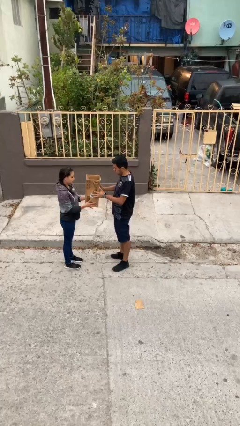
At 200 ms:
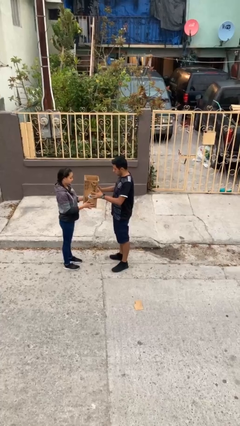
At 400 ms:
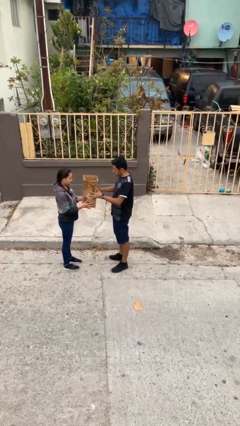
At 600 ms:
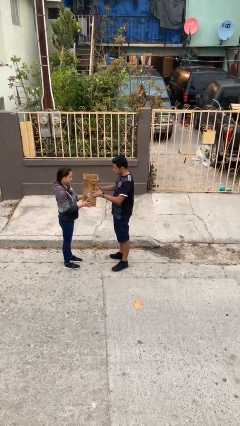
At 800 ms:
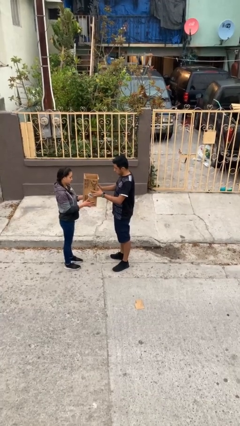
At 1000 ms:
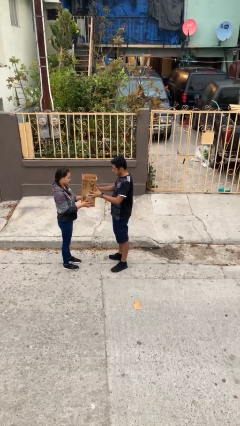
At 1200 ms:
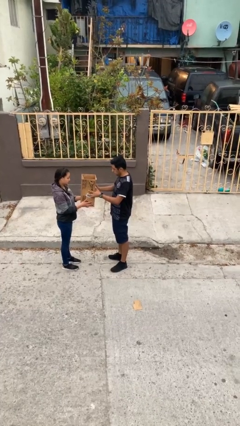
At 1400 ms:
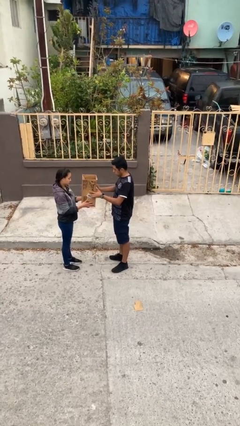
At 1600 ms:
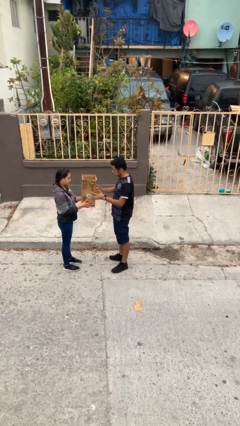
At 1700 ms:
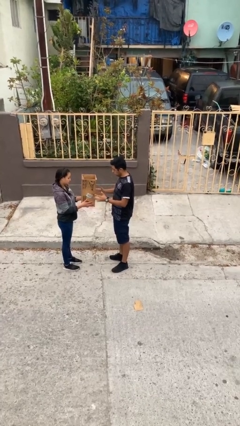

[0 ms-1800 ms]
person transfers object to person

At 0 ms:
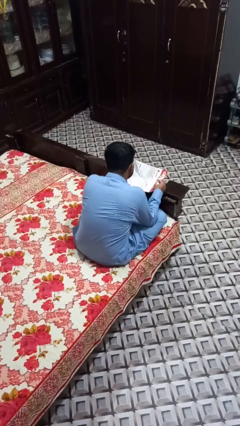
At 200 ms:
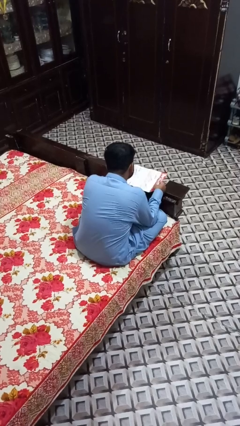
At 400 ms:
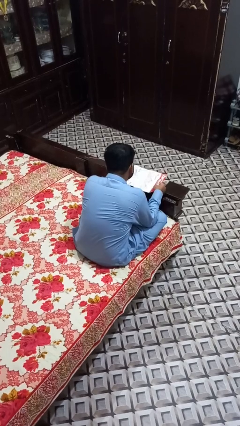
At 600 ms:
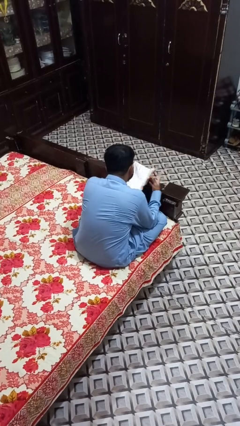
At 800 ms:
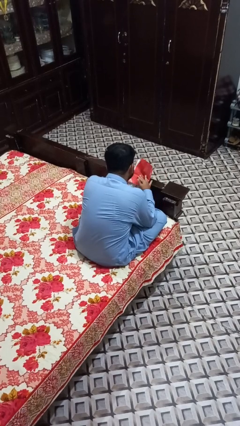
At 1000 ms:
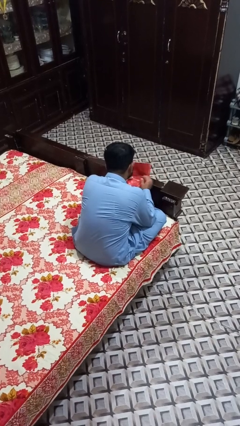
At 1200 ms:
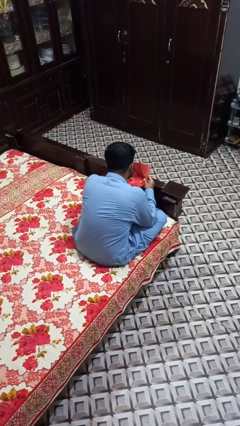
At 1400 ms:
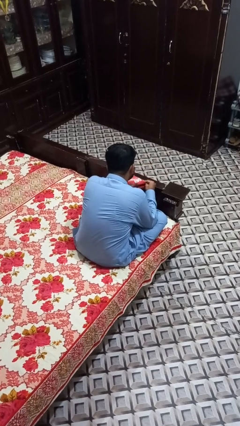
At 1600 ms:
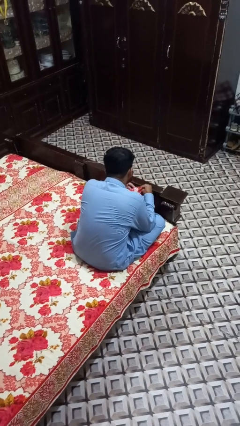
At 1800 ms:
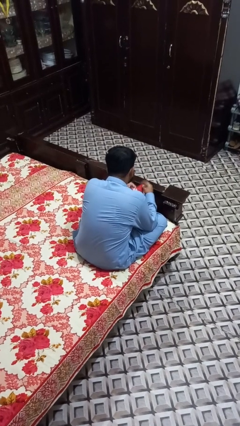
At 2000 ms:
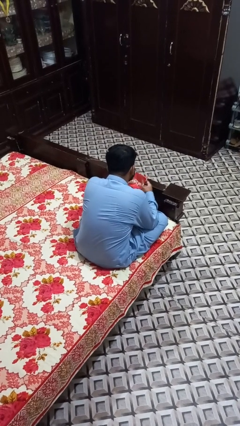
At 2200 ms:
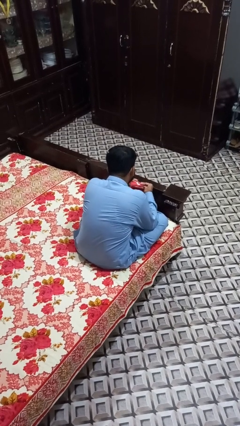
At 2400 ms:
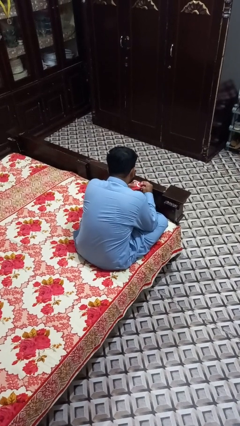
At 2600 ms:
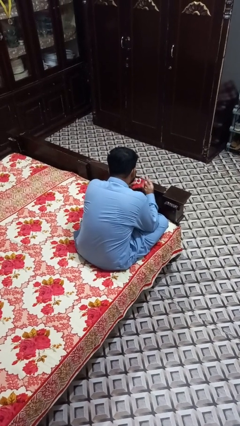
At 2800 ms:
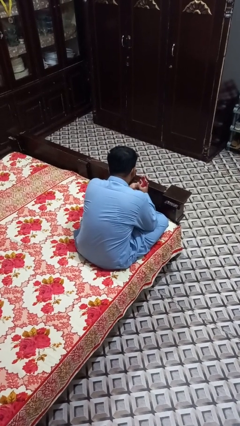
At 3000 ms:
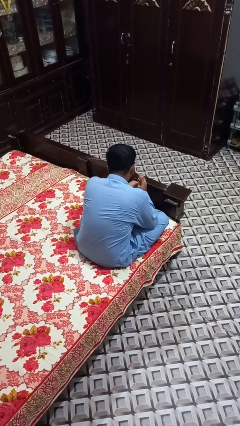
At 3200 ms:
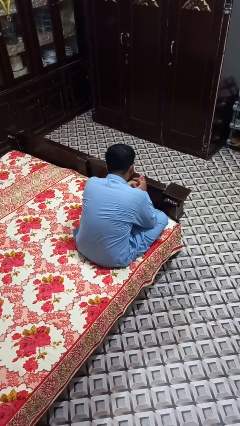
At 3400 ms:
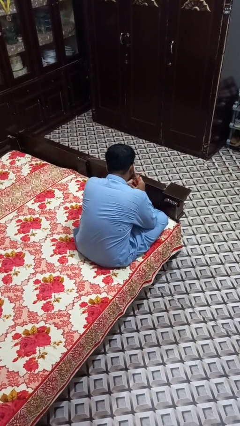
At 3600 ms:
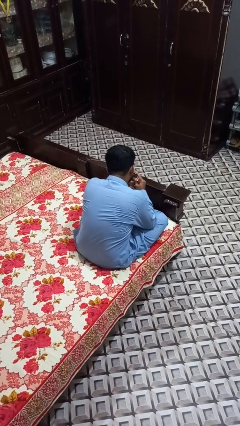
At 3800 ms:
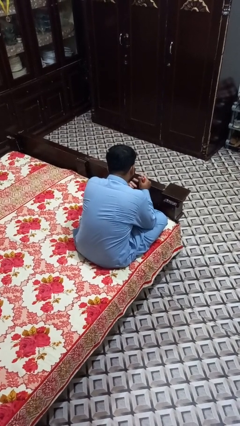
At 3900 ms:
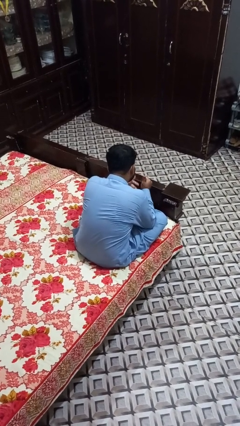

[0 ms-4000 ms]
person crumples paper

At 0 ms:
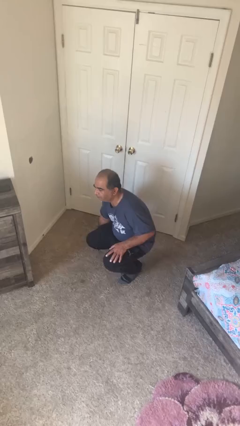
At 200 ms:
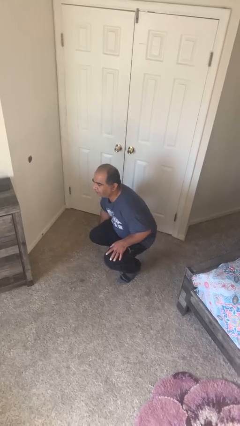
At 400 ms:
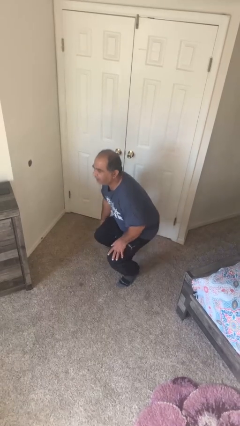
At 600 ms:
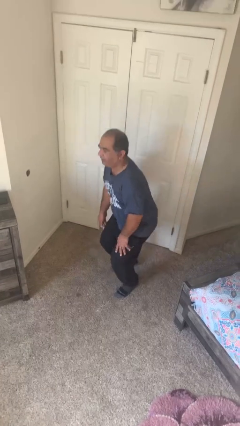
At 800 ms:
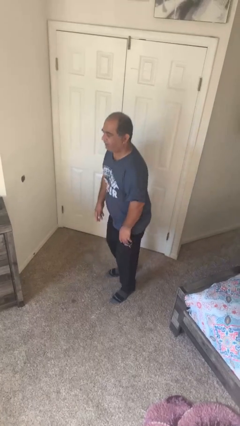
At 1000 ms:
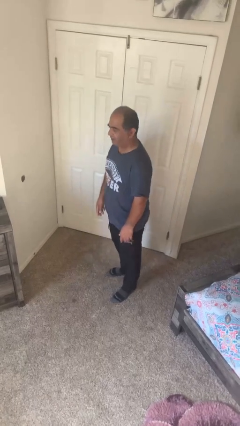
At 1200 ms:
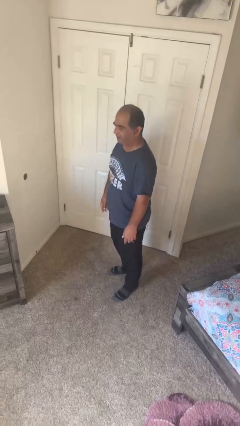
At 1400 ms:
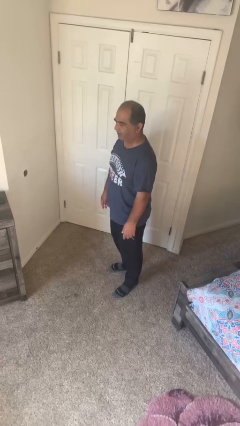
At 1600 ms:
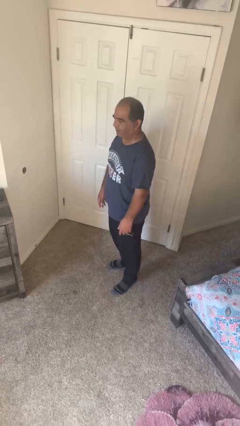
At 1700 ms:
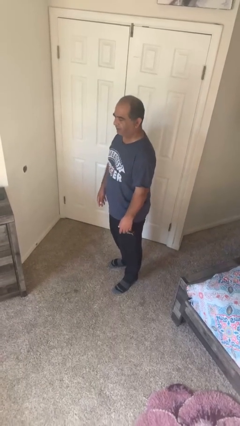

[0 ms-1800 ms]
person stands up

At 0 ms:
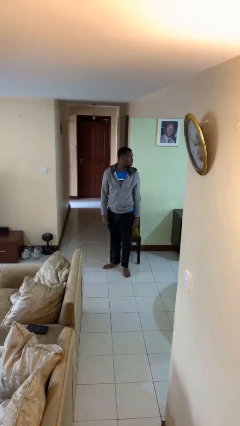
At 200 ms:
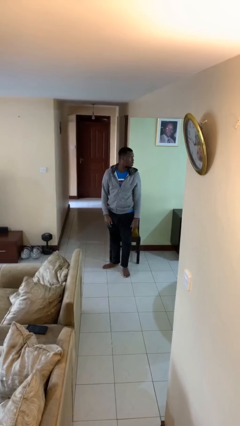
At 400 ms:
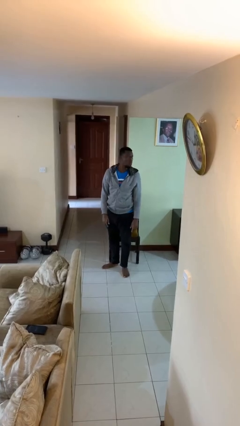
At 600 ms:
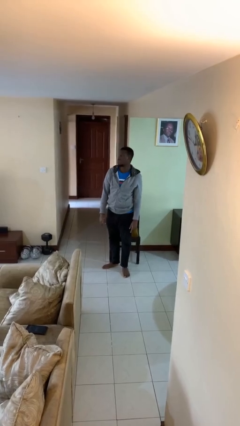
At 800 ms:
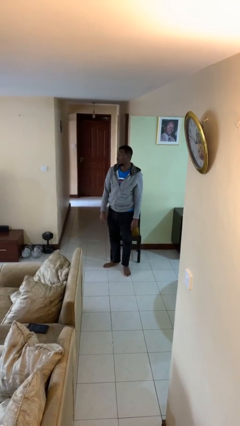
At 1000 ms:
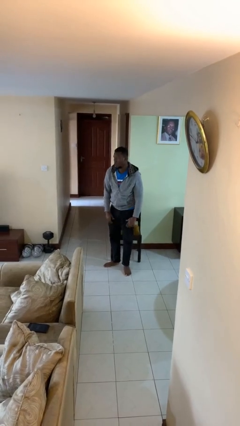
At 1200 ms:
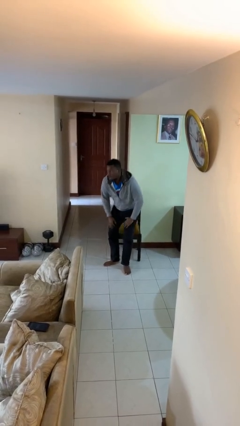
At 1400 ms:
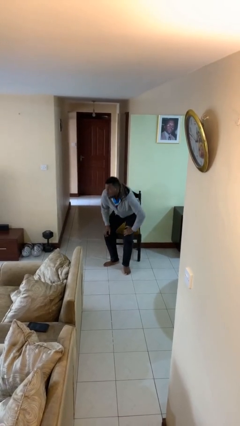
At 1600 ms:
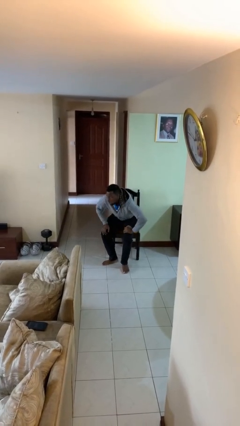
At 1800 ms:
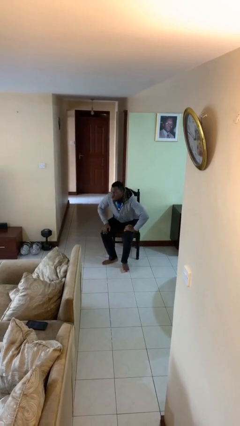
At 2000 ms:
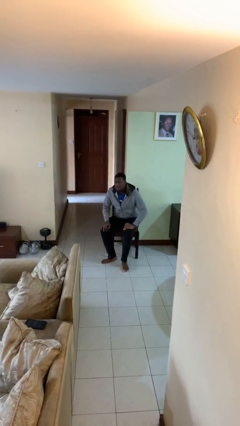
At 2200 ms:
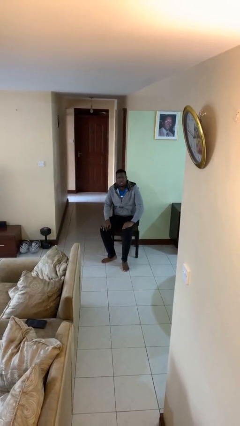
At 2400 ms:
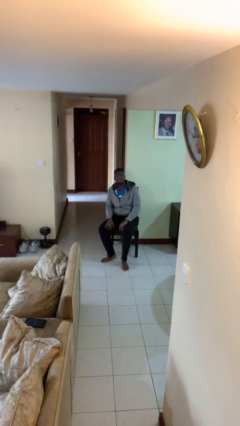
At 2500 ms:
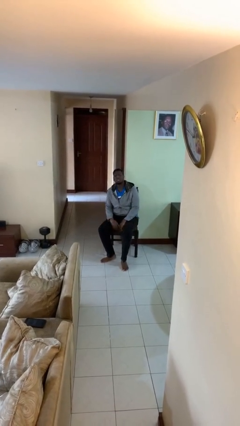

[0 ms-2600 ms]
person sits down

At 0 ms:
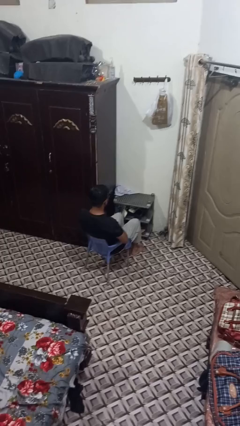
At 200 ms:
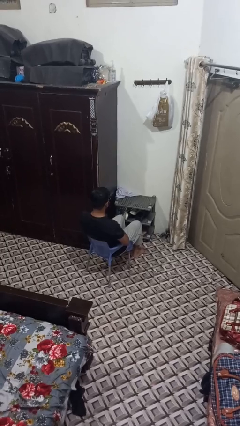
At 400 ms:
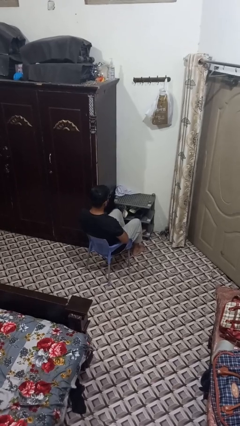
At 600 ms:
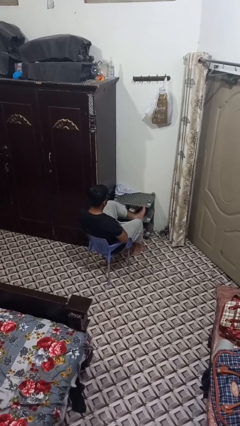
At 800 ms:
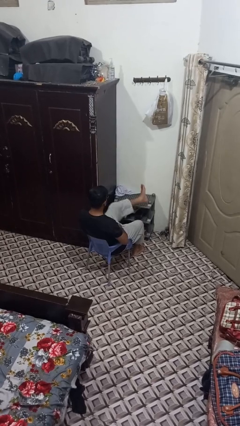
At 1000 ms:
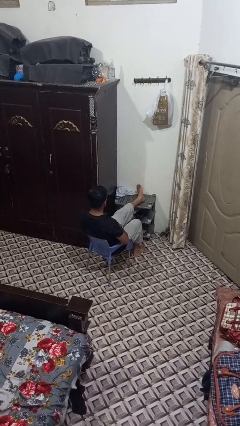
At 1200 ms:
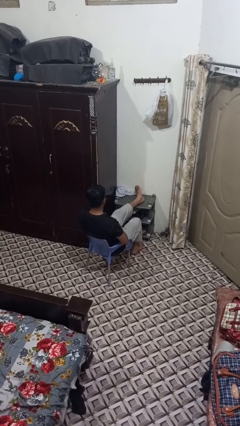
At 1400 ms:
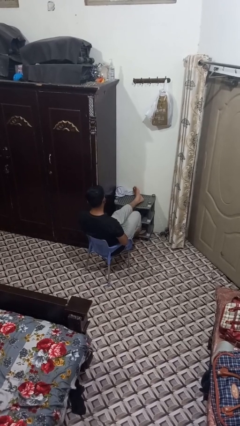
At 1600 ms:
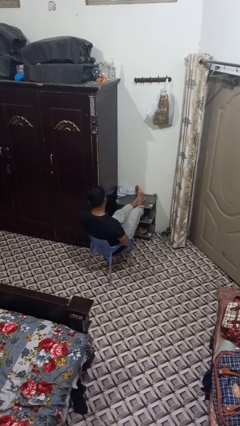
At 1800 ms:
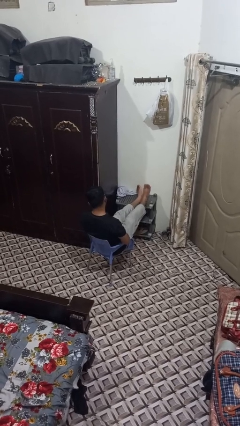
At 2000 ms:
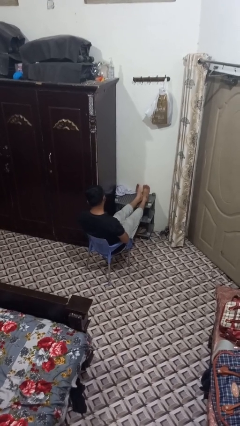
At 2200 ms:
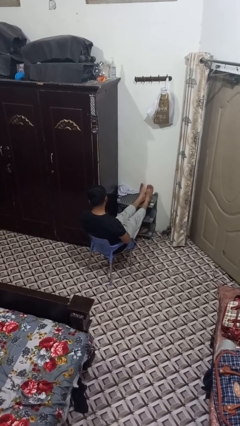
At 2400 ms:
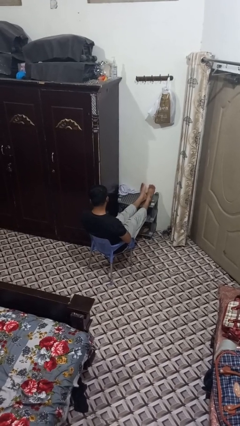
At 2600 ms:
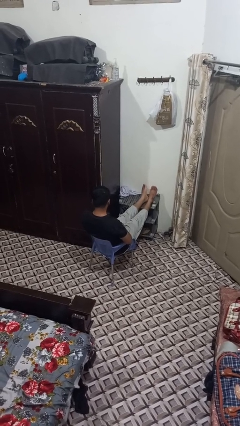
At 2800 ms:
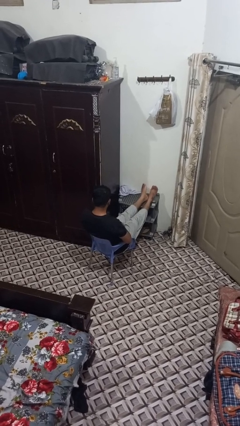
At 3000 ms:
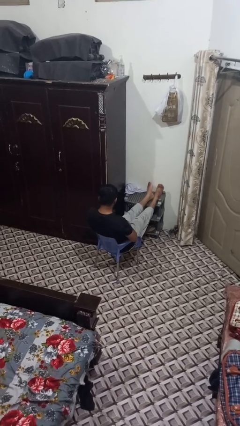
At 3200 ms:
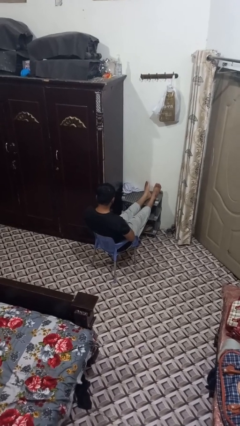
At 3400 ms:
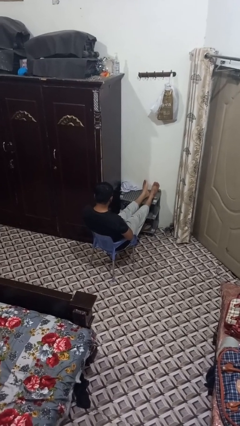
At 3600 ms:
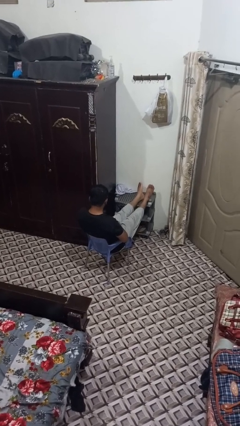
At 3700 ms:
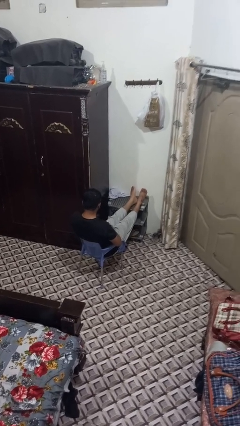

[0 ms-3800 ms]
person puts feet up

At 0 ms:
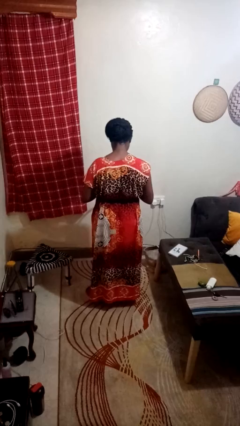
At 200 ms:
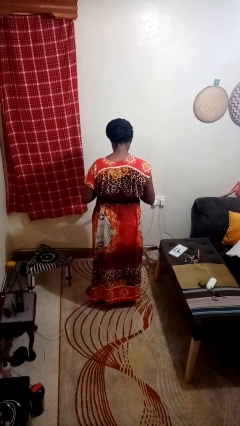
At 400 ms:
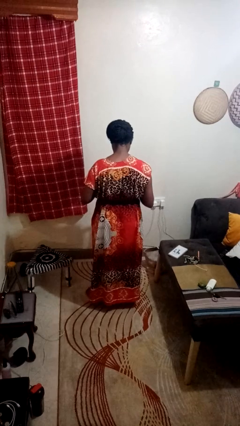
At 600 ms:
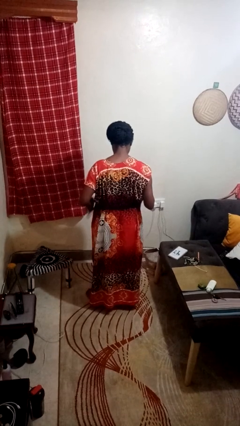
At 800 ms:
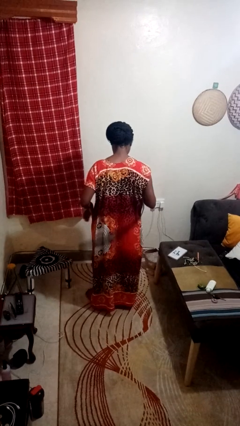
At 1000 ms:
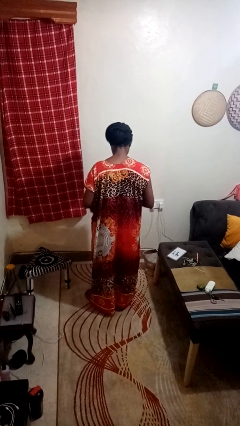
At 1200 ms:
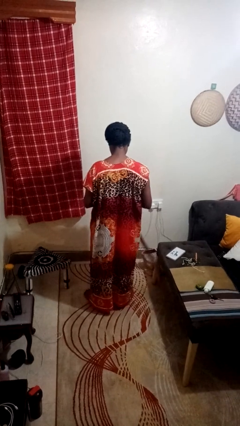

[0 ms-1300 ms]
person takes off belt

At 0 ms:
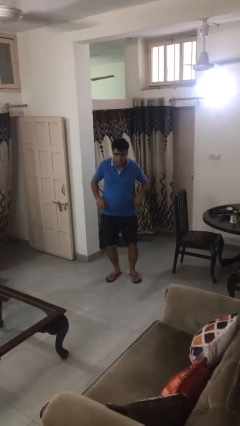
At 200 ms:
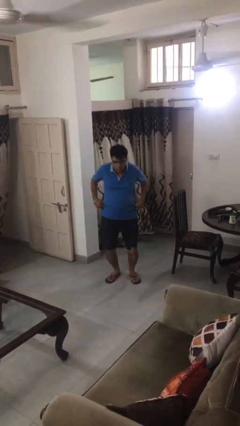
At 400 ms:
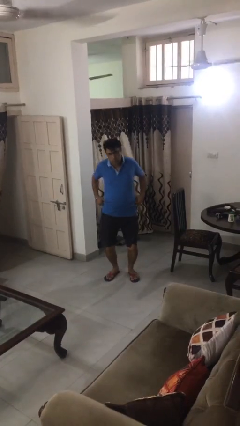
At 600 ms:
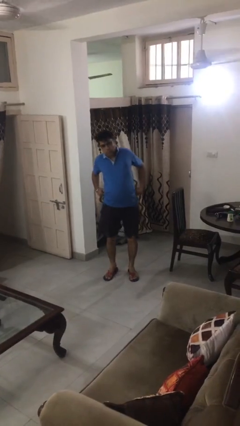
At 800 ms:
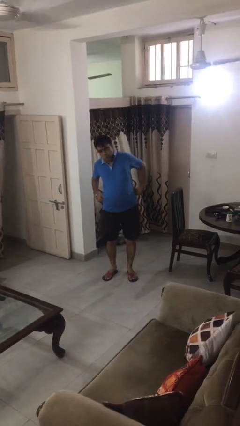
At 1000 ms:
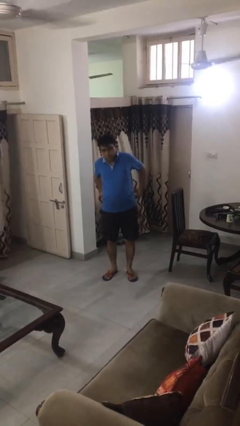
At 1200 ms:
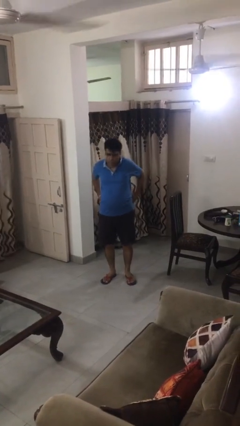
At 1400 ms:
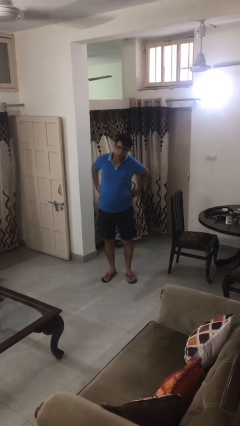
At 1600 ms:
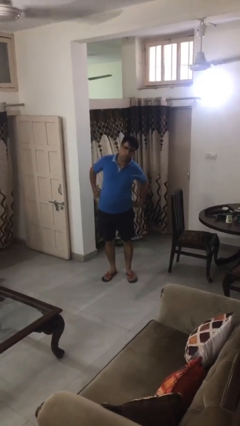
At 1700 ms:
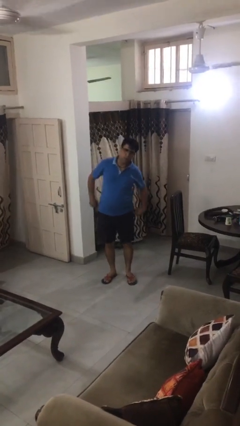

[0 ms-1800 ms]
person hikes up pants

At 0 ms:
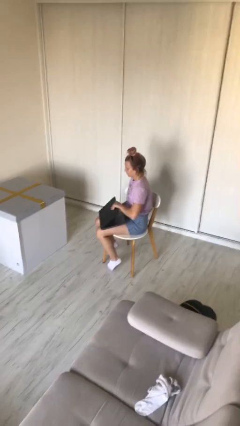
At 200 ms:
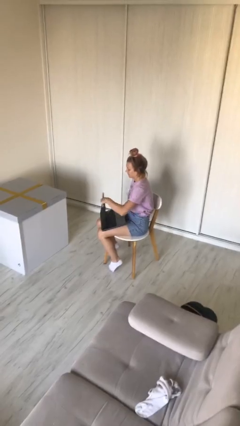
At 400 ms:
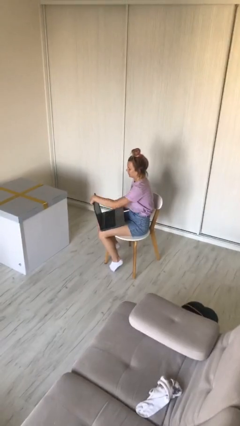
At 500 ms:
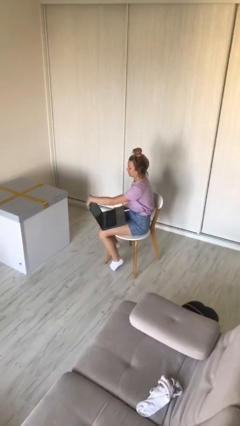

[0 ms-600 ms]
person opens laptop
